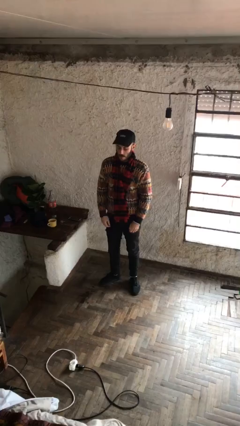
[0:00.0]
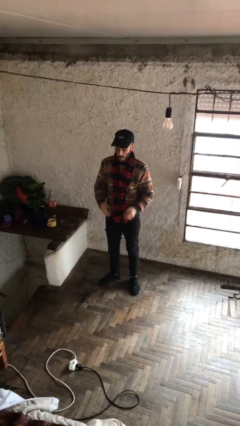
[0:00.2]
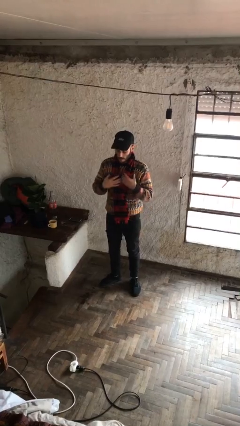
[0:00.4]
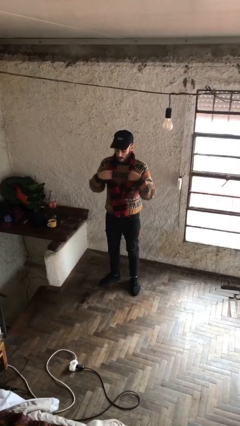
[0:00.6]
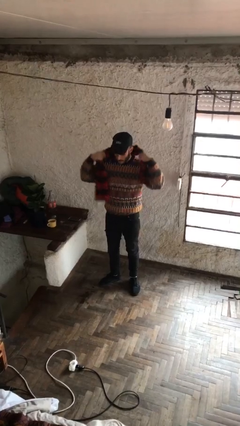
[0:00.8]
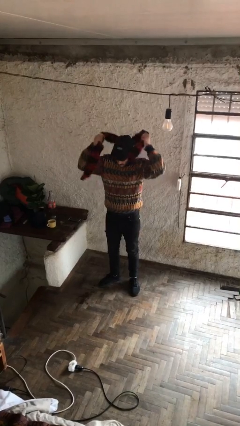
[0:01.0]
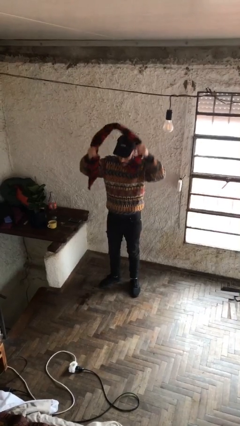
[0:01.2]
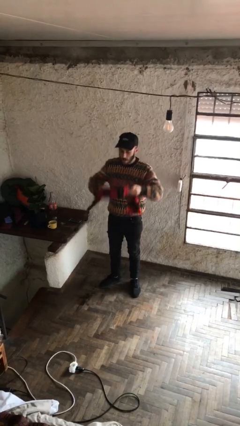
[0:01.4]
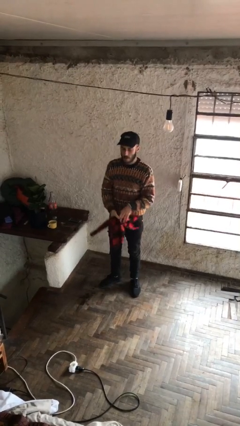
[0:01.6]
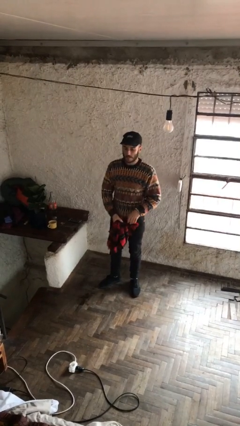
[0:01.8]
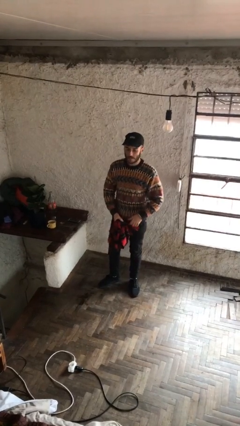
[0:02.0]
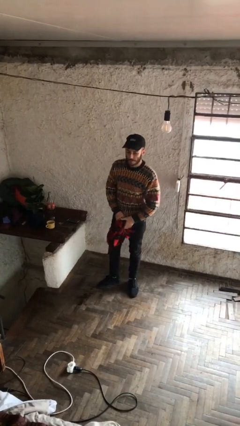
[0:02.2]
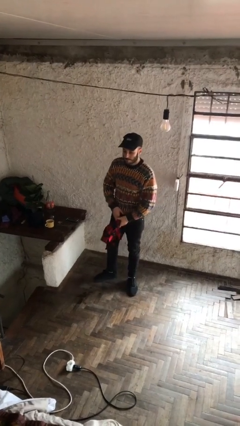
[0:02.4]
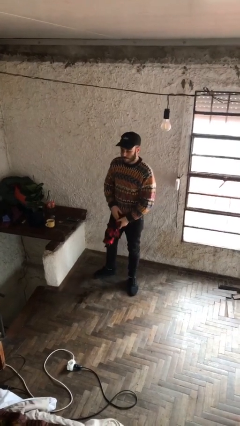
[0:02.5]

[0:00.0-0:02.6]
person takes off scarf

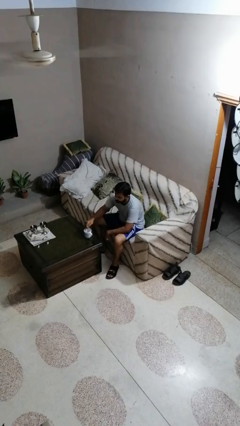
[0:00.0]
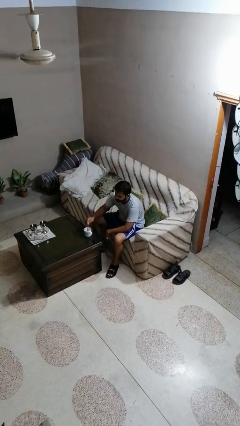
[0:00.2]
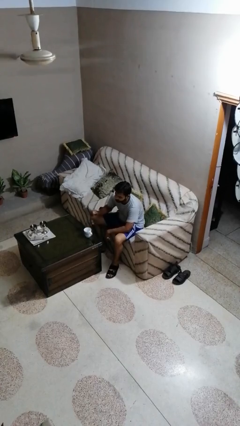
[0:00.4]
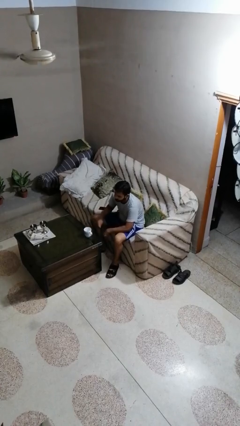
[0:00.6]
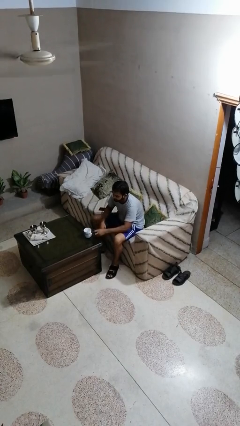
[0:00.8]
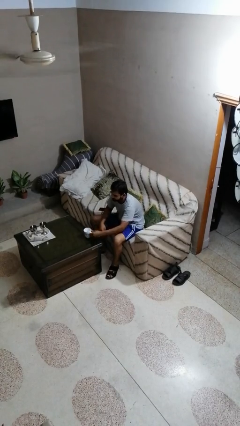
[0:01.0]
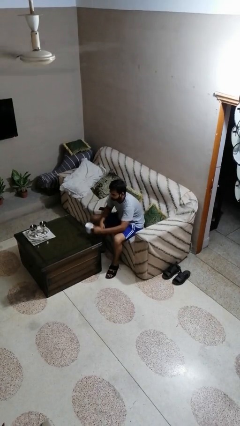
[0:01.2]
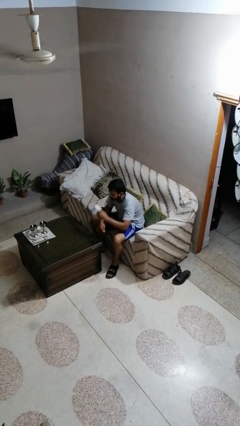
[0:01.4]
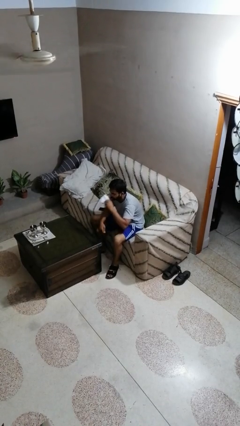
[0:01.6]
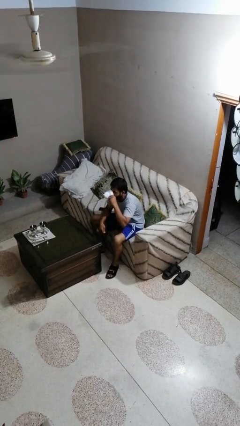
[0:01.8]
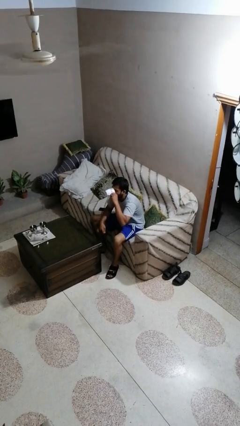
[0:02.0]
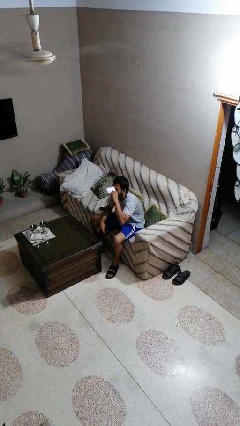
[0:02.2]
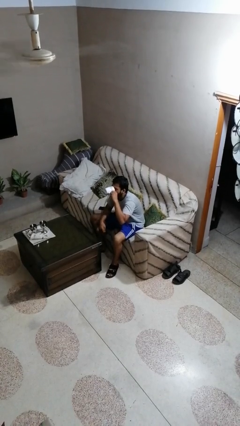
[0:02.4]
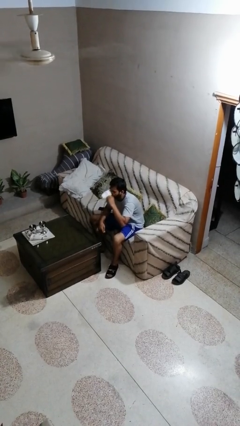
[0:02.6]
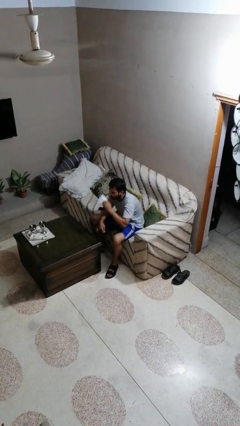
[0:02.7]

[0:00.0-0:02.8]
person drinks from mug

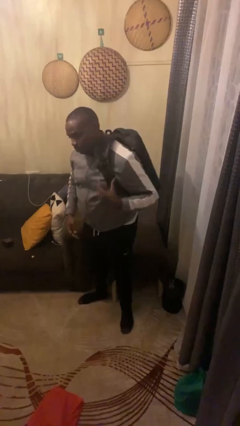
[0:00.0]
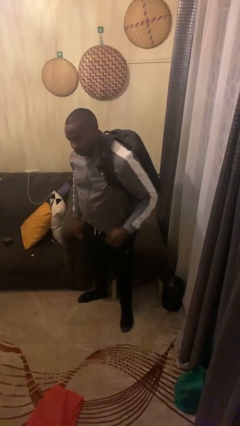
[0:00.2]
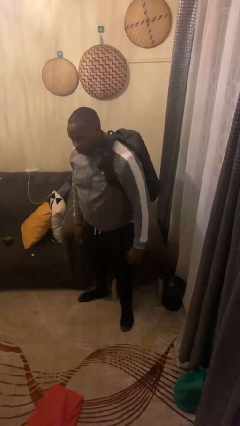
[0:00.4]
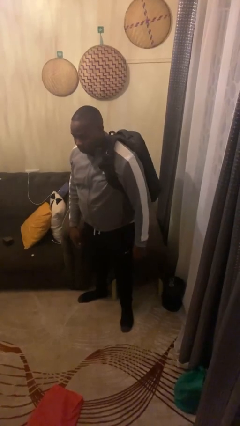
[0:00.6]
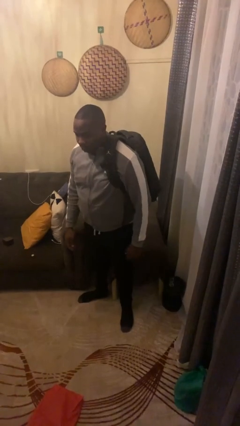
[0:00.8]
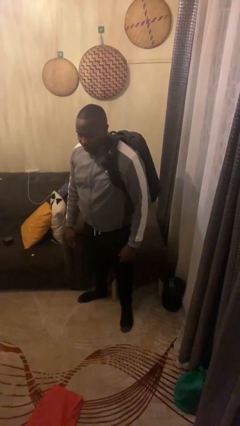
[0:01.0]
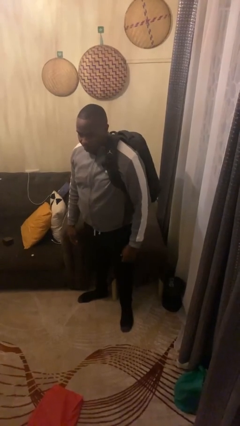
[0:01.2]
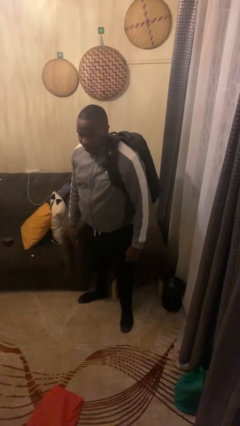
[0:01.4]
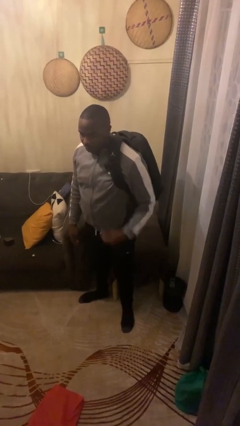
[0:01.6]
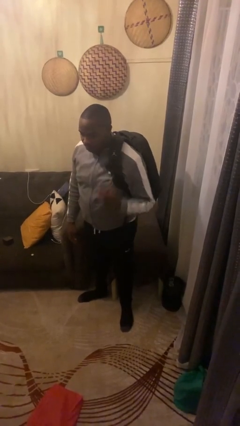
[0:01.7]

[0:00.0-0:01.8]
person puts on backpack

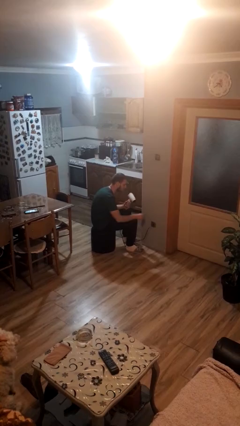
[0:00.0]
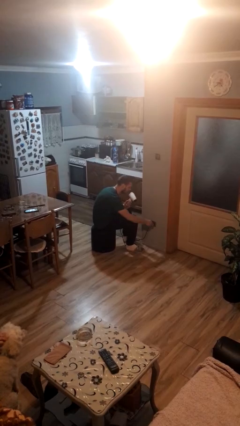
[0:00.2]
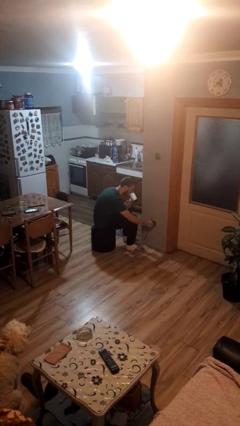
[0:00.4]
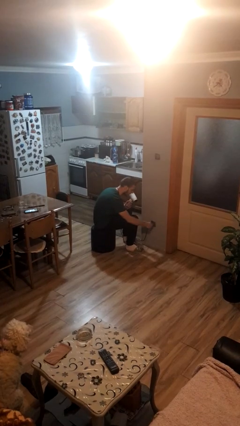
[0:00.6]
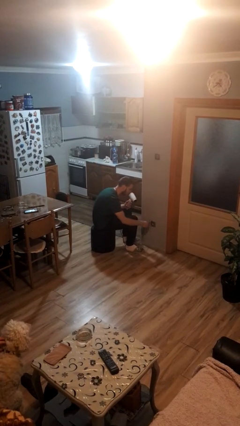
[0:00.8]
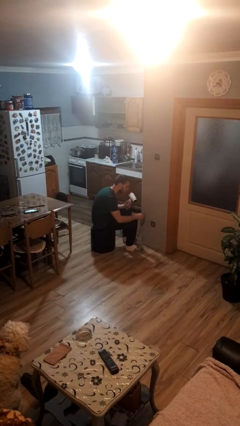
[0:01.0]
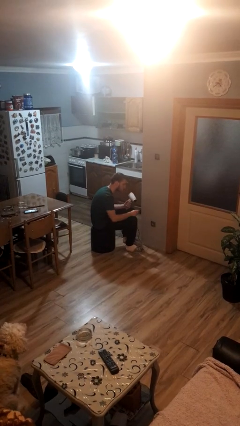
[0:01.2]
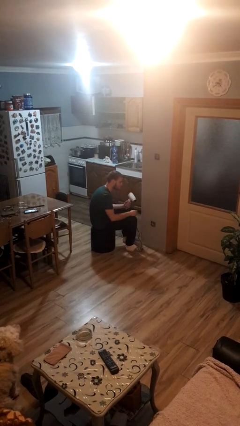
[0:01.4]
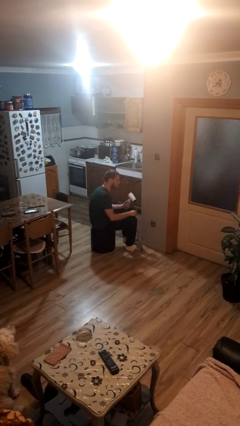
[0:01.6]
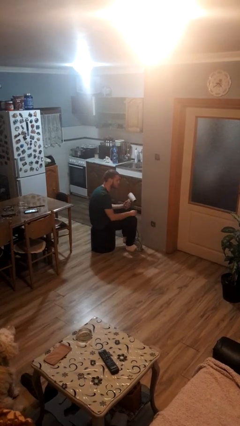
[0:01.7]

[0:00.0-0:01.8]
person unplugs from electrical socket

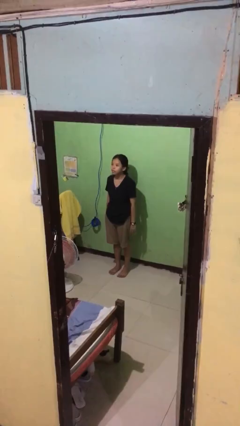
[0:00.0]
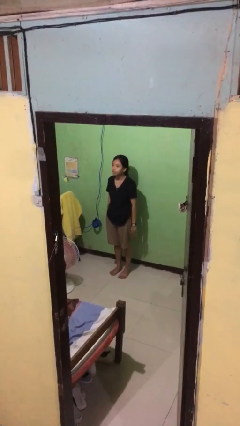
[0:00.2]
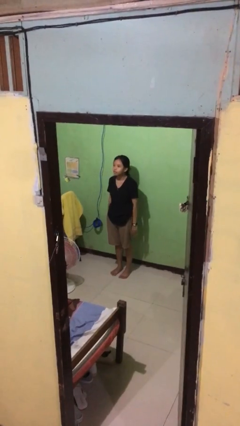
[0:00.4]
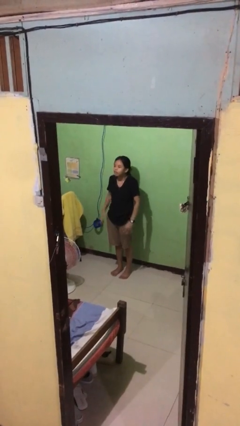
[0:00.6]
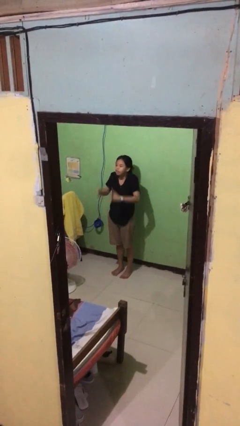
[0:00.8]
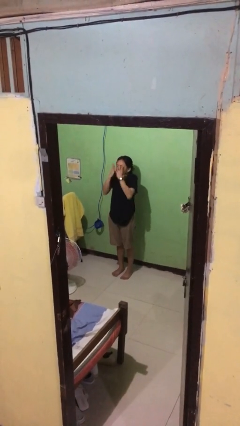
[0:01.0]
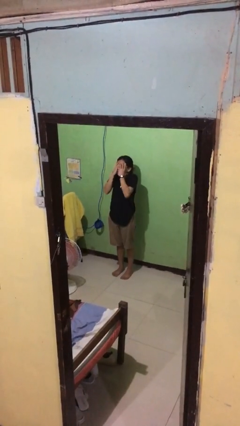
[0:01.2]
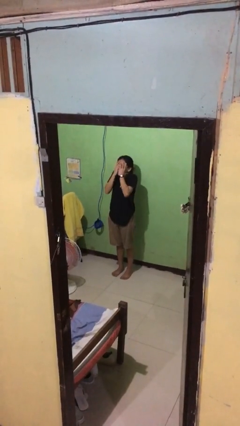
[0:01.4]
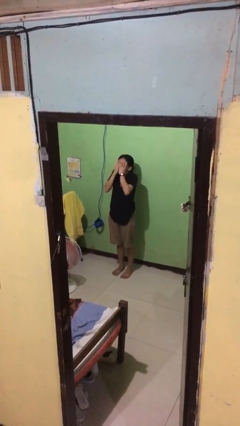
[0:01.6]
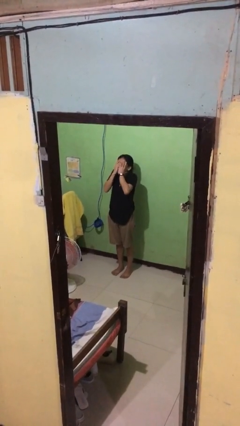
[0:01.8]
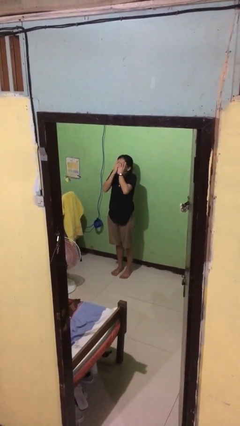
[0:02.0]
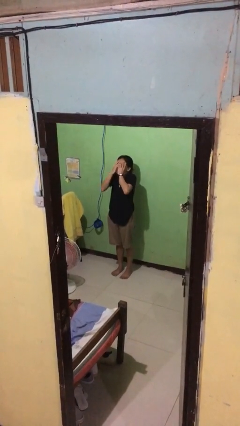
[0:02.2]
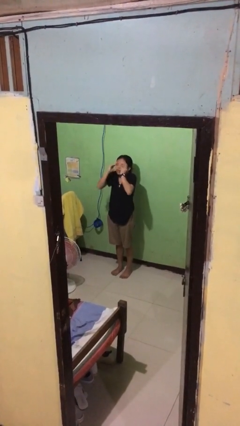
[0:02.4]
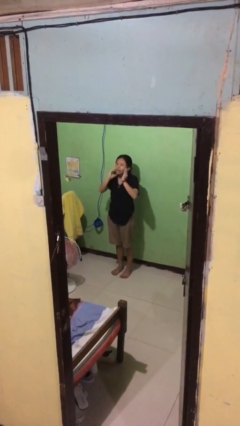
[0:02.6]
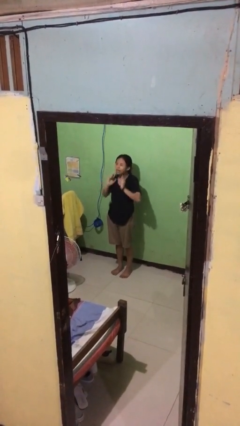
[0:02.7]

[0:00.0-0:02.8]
person covers face with hands

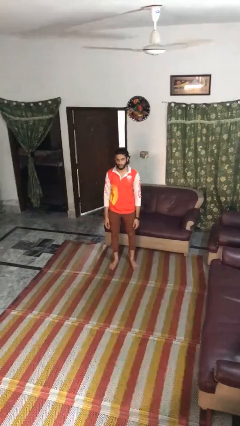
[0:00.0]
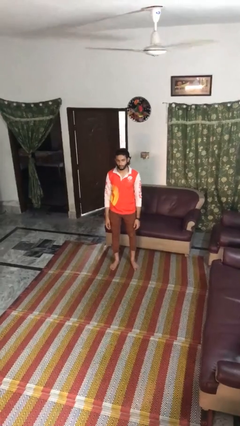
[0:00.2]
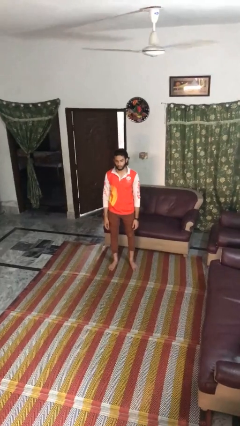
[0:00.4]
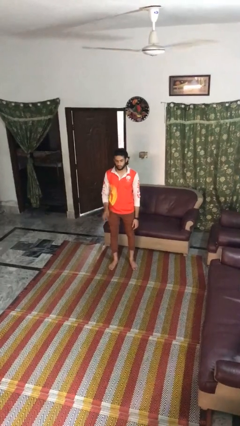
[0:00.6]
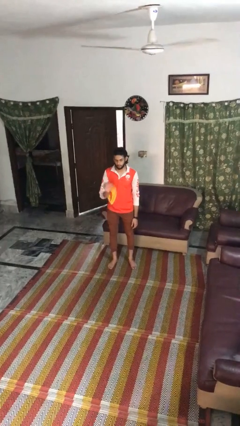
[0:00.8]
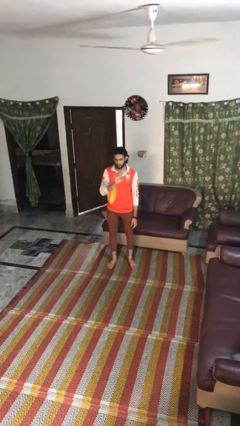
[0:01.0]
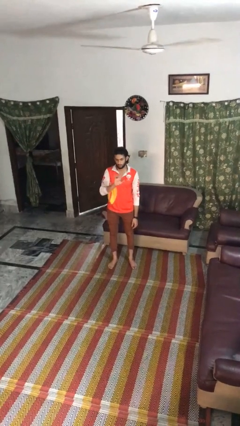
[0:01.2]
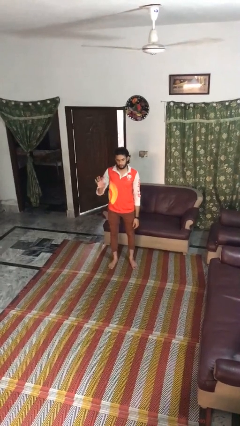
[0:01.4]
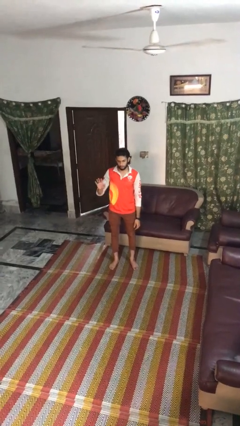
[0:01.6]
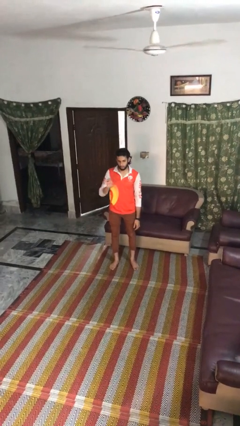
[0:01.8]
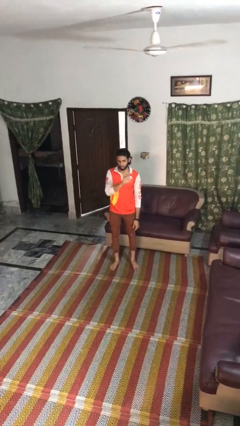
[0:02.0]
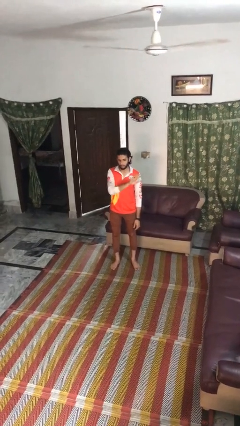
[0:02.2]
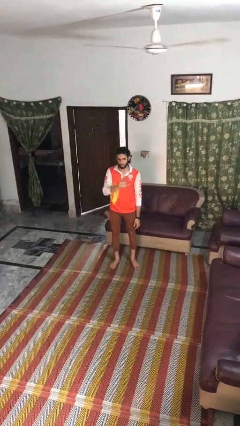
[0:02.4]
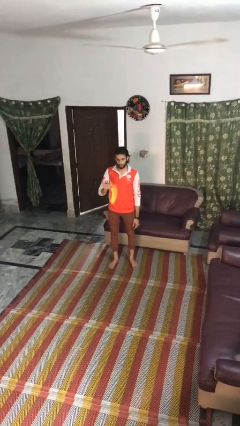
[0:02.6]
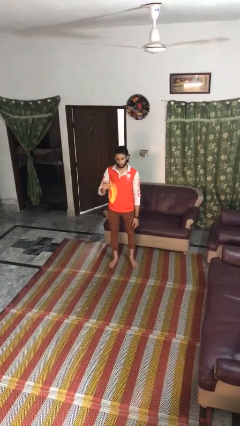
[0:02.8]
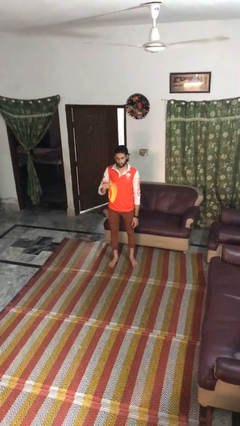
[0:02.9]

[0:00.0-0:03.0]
person gestures swipe right

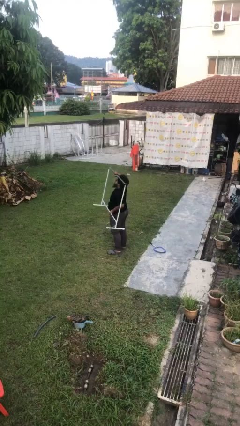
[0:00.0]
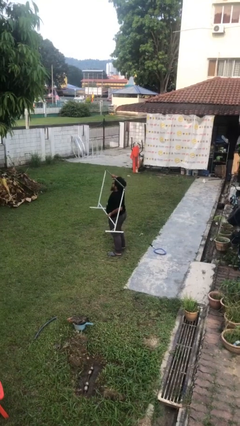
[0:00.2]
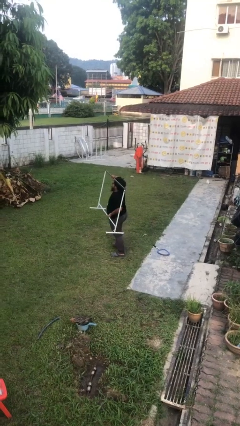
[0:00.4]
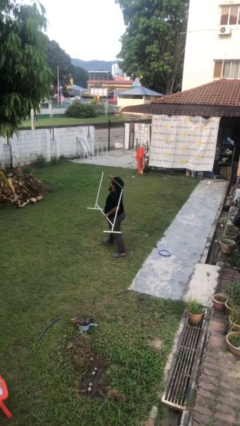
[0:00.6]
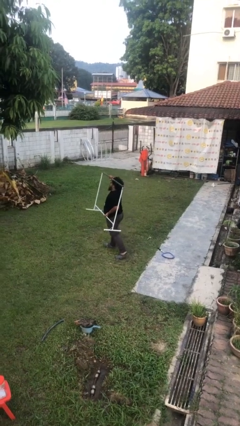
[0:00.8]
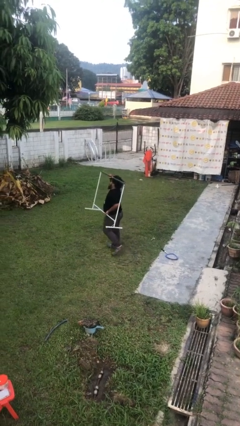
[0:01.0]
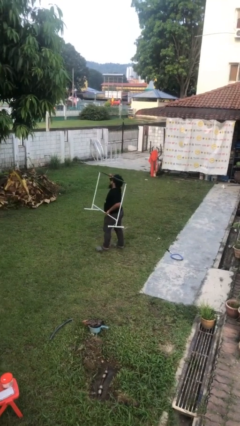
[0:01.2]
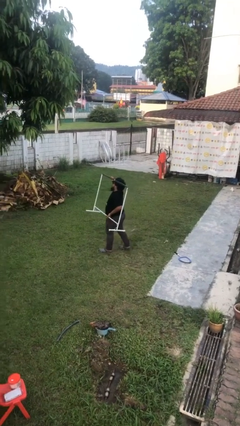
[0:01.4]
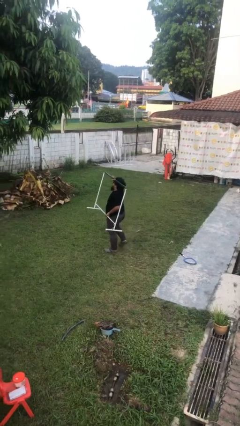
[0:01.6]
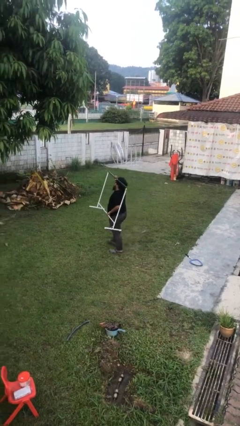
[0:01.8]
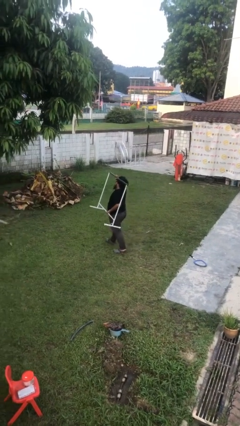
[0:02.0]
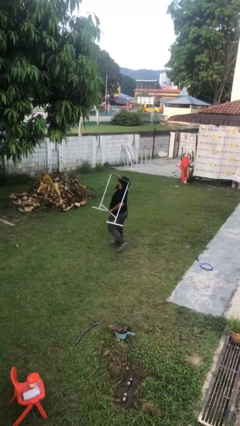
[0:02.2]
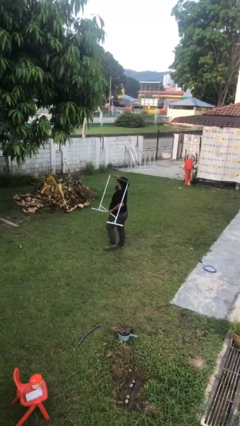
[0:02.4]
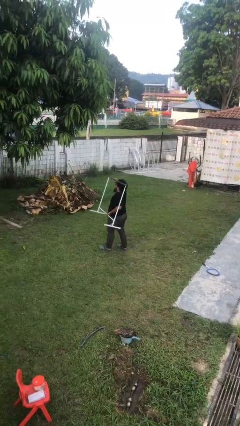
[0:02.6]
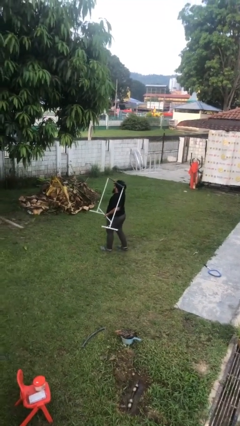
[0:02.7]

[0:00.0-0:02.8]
person carries heavy object
